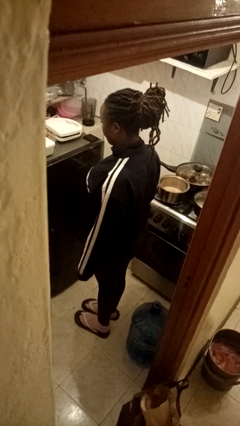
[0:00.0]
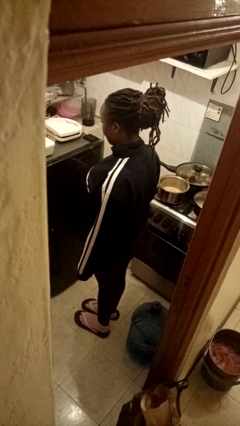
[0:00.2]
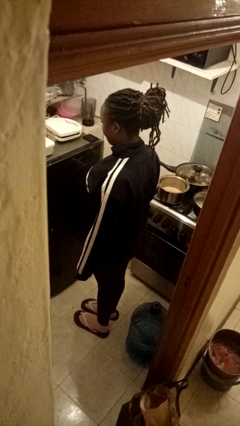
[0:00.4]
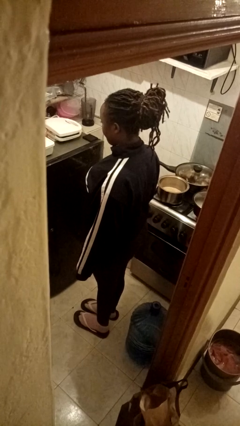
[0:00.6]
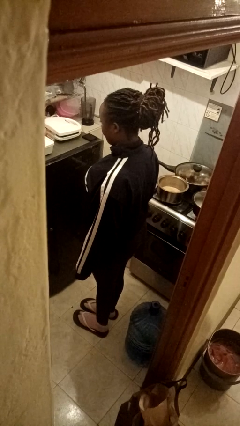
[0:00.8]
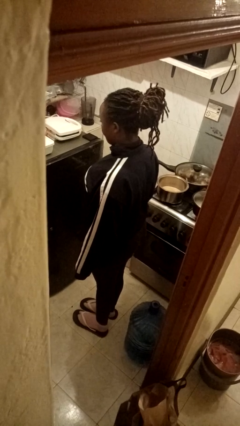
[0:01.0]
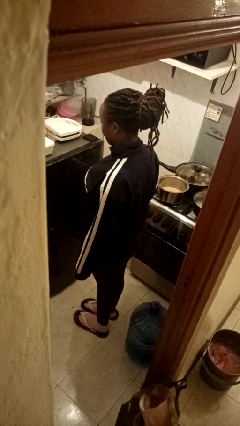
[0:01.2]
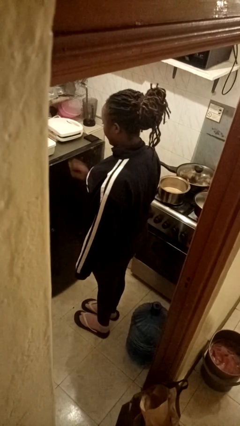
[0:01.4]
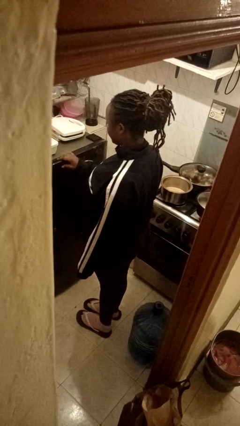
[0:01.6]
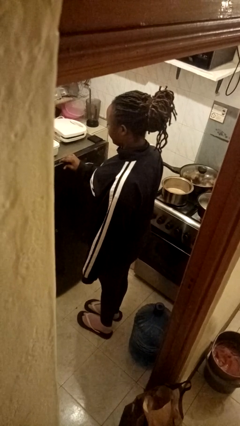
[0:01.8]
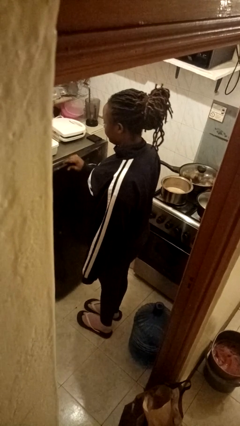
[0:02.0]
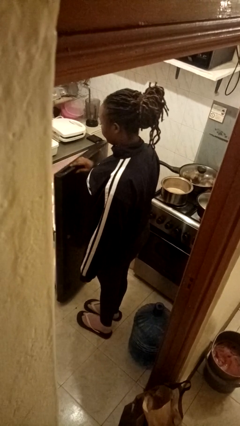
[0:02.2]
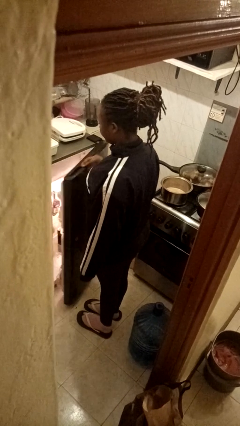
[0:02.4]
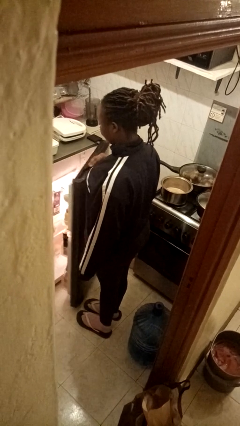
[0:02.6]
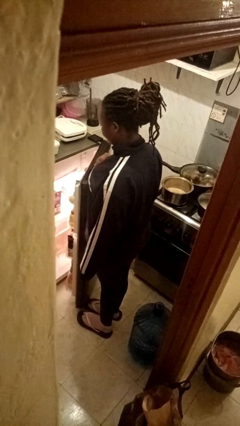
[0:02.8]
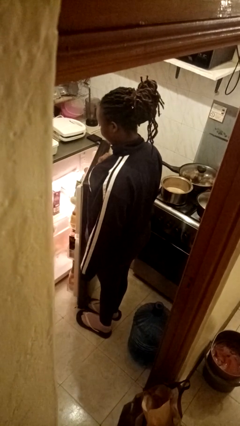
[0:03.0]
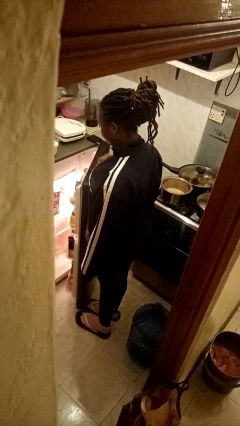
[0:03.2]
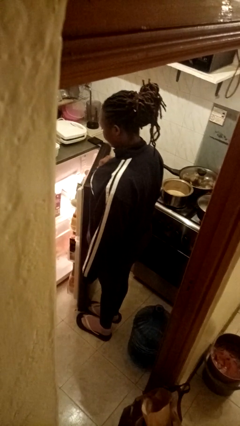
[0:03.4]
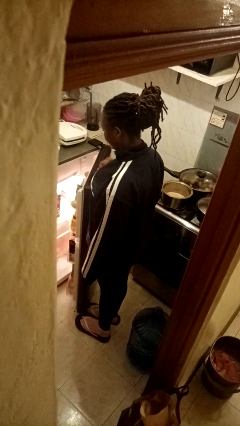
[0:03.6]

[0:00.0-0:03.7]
person opens refrigerator

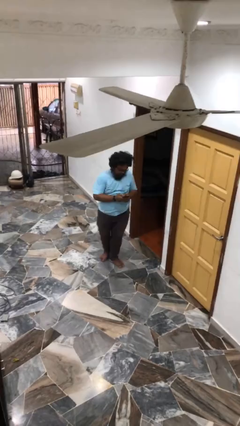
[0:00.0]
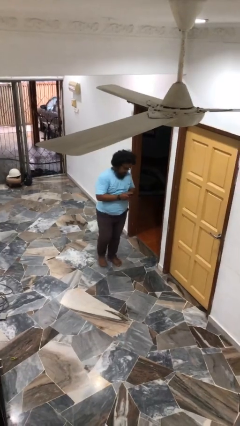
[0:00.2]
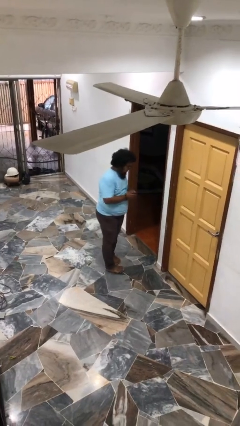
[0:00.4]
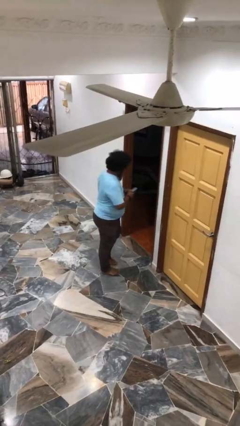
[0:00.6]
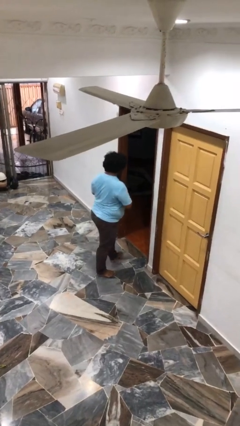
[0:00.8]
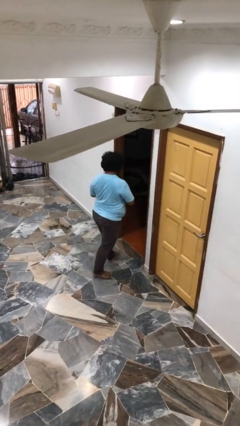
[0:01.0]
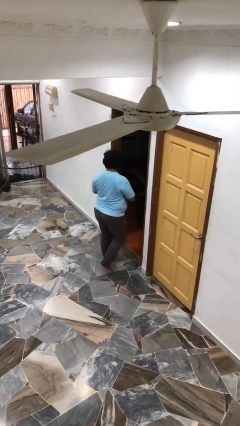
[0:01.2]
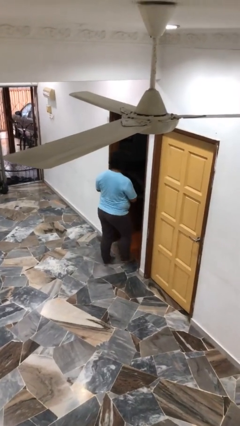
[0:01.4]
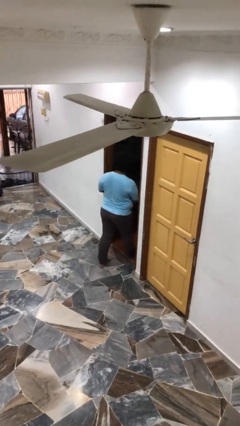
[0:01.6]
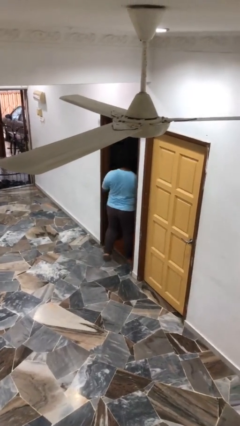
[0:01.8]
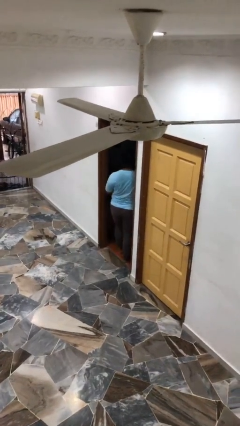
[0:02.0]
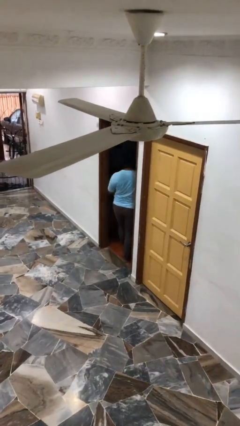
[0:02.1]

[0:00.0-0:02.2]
person exits scene through structure

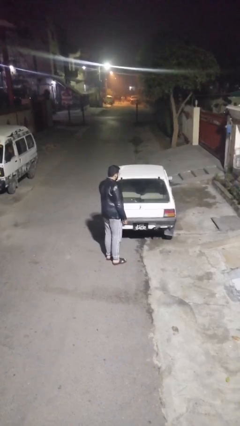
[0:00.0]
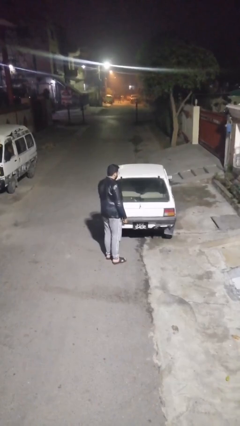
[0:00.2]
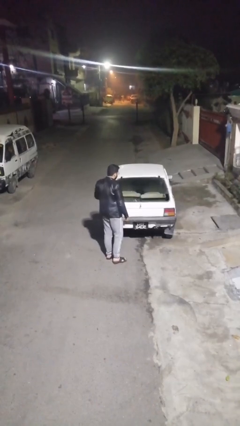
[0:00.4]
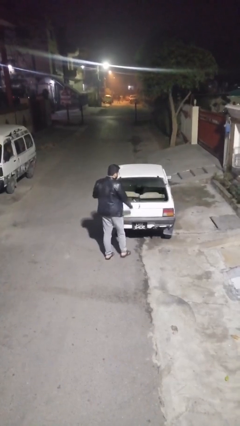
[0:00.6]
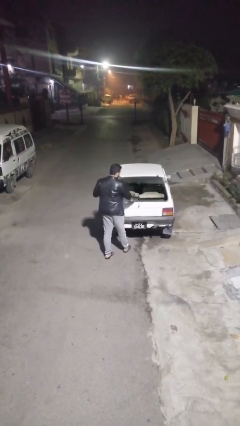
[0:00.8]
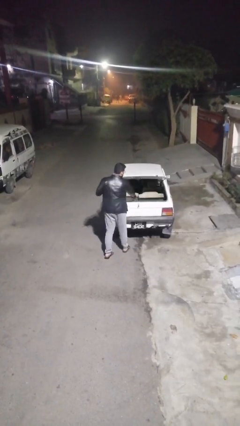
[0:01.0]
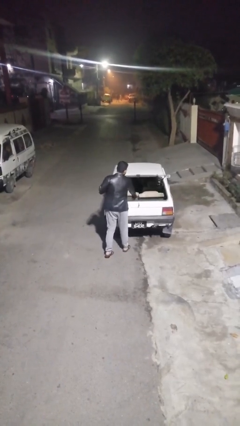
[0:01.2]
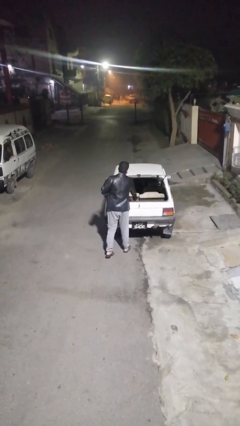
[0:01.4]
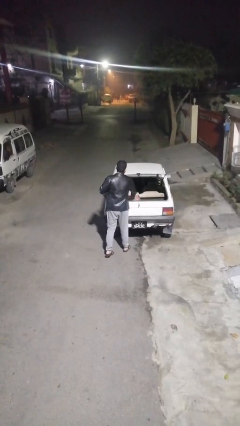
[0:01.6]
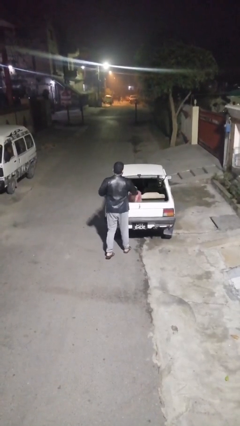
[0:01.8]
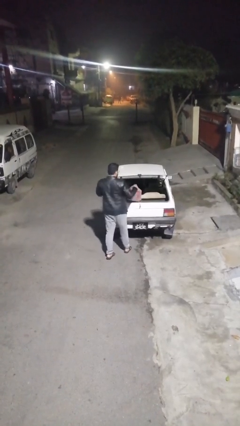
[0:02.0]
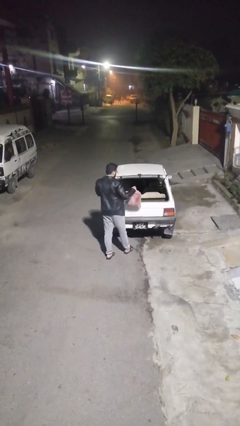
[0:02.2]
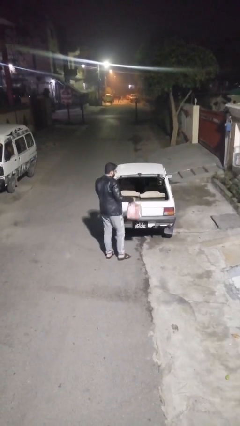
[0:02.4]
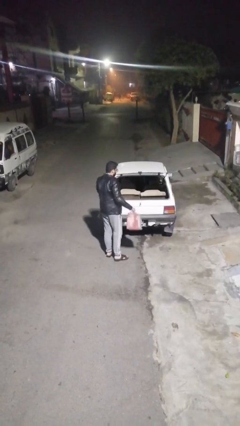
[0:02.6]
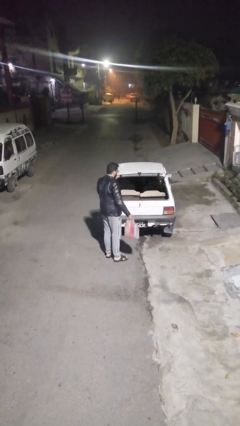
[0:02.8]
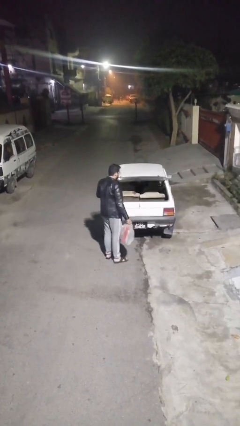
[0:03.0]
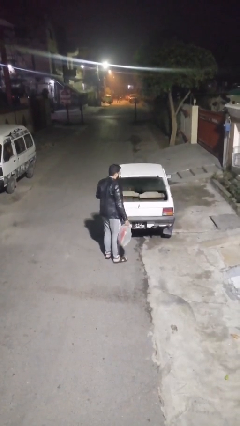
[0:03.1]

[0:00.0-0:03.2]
person unloads car

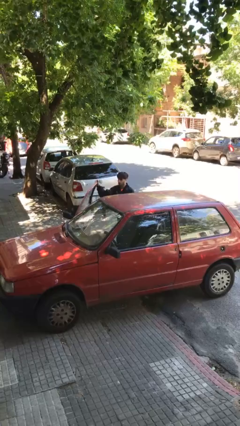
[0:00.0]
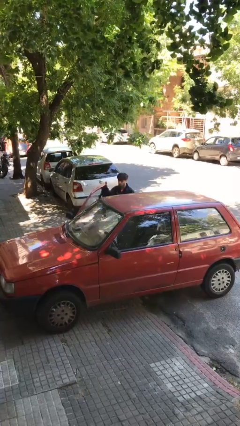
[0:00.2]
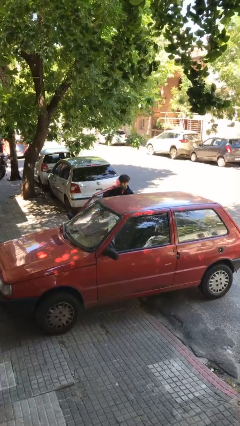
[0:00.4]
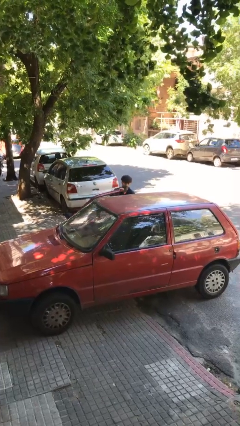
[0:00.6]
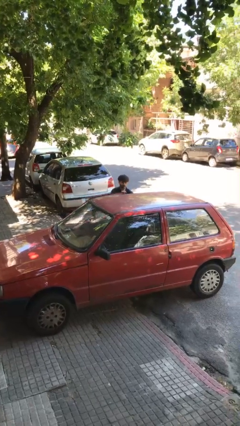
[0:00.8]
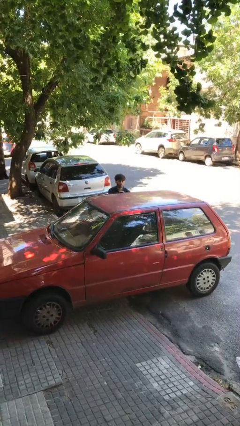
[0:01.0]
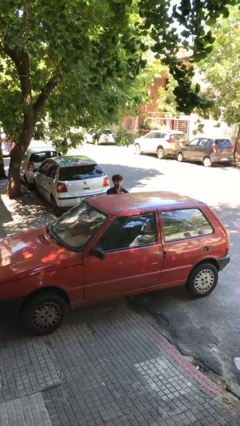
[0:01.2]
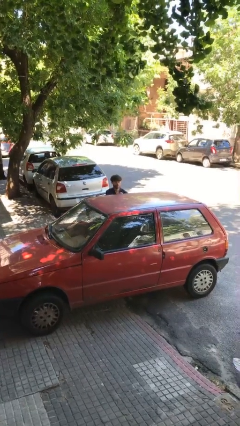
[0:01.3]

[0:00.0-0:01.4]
person closes car door

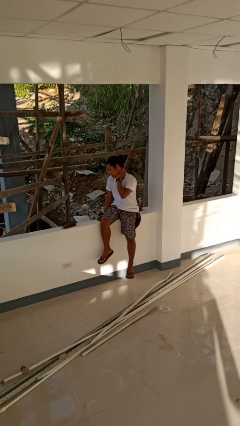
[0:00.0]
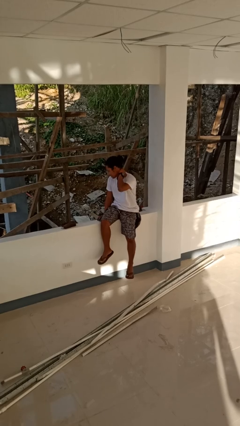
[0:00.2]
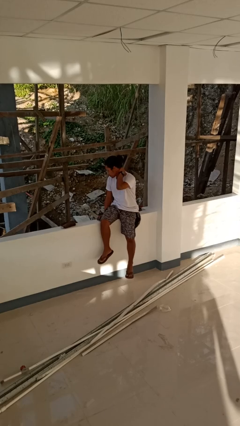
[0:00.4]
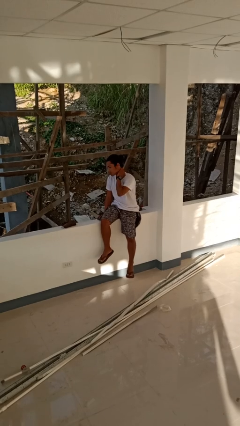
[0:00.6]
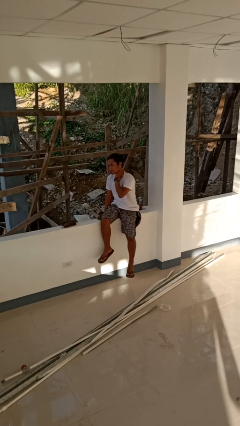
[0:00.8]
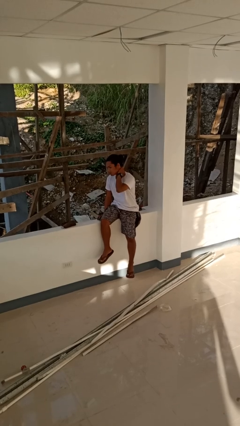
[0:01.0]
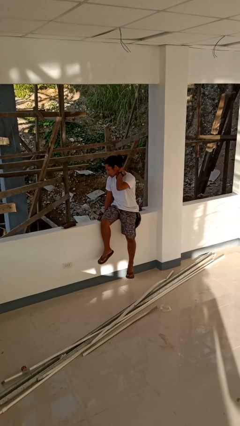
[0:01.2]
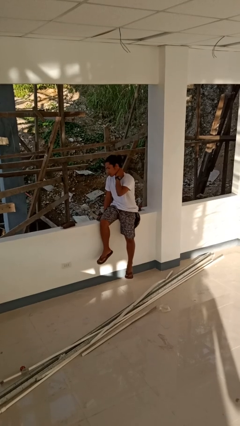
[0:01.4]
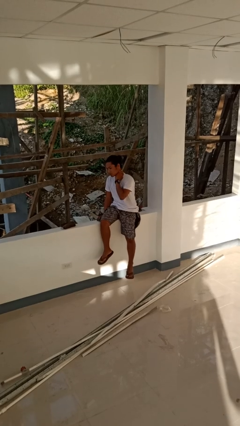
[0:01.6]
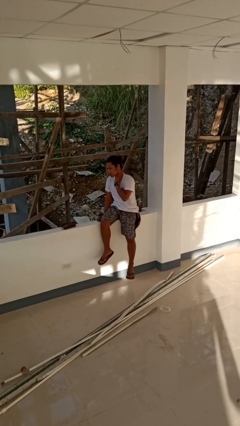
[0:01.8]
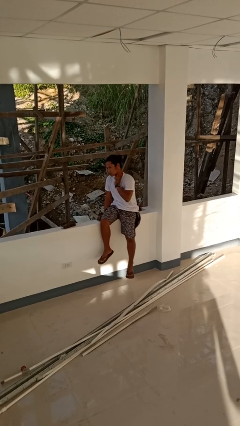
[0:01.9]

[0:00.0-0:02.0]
person rubs neck

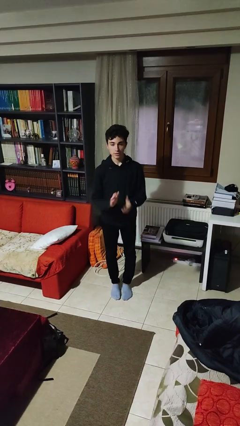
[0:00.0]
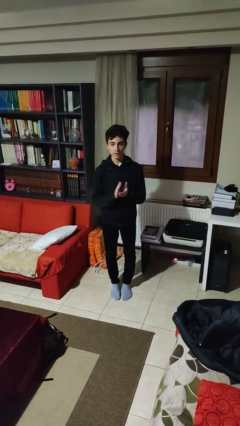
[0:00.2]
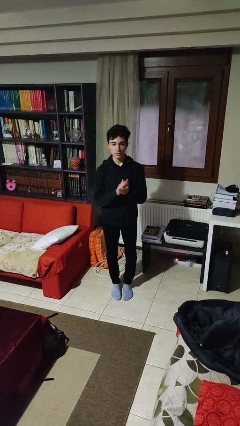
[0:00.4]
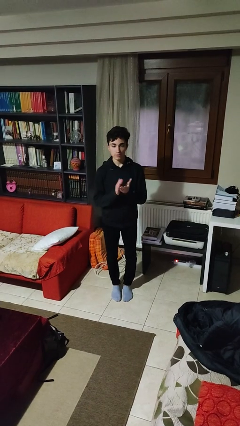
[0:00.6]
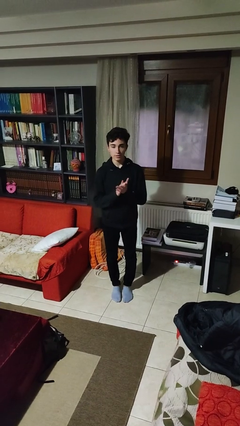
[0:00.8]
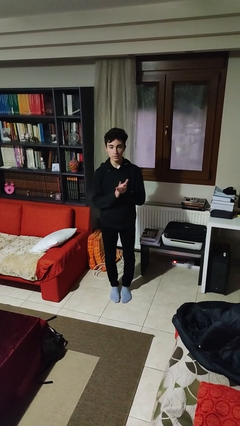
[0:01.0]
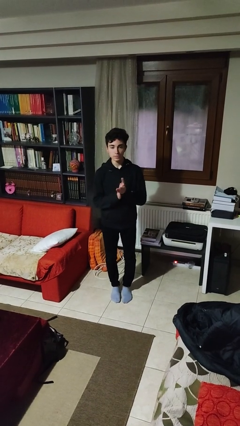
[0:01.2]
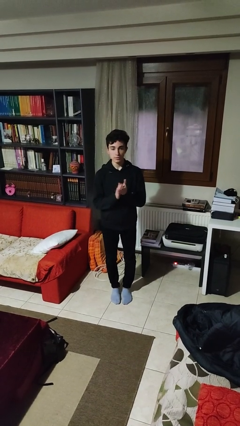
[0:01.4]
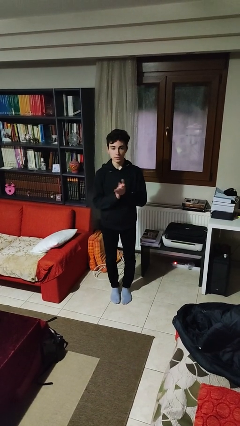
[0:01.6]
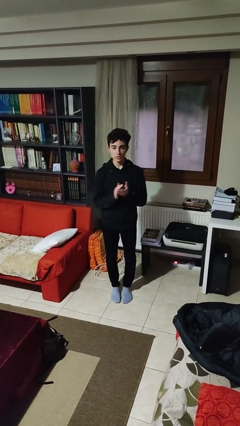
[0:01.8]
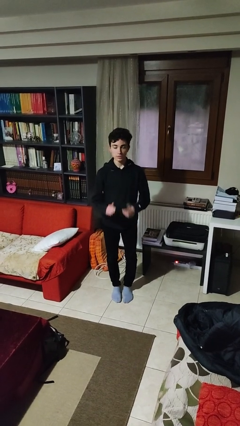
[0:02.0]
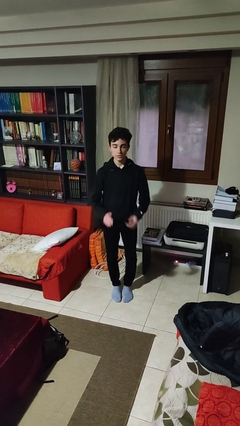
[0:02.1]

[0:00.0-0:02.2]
person claps hands

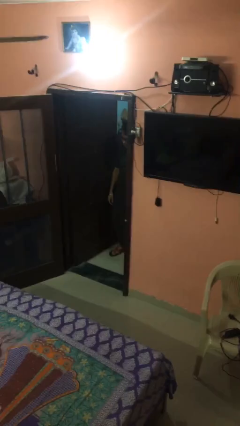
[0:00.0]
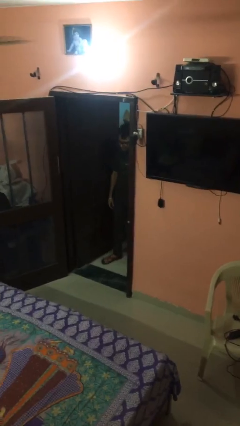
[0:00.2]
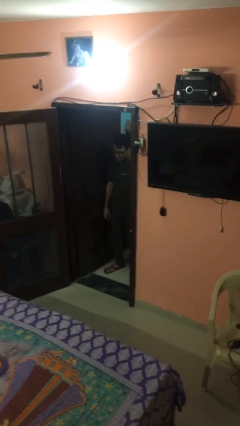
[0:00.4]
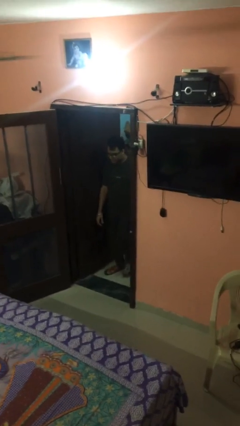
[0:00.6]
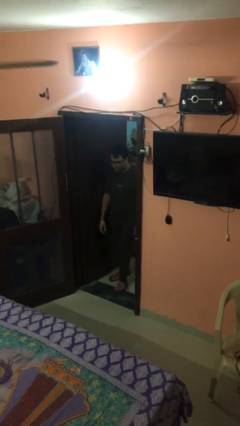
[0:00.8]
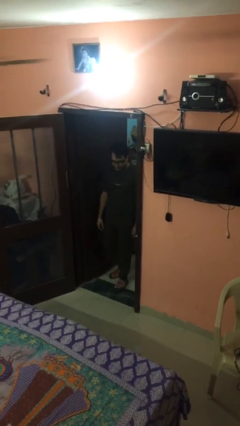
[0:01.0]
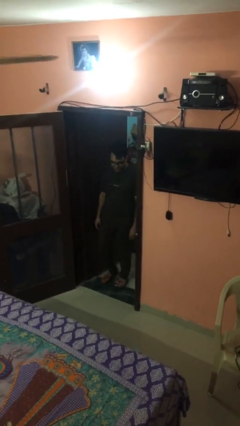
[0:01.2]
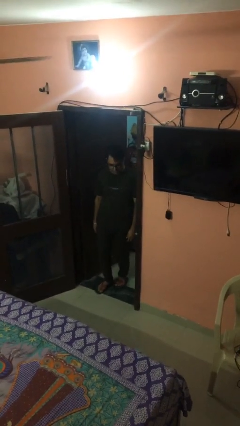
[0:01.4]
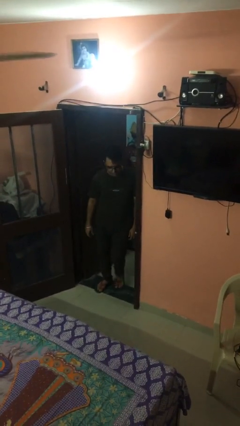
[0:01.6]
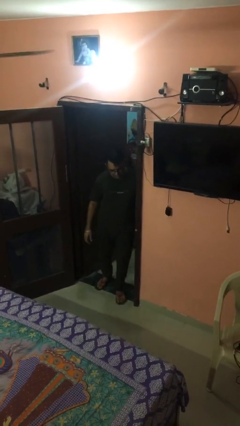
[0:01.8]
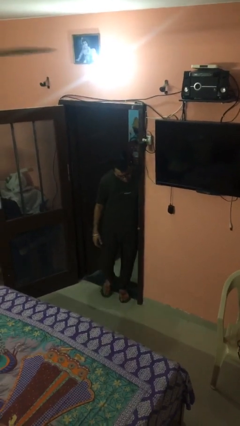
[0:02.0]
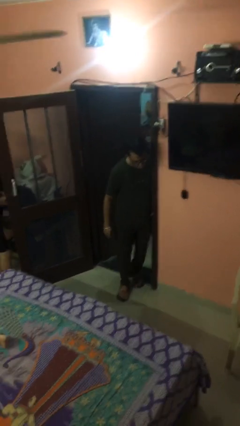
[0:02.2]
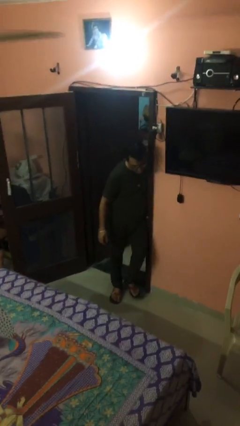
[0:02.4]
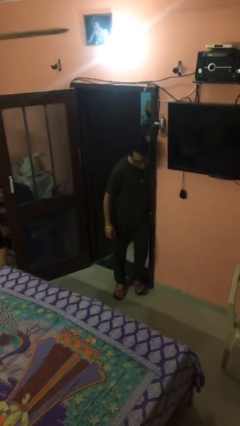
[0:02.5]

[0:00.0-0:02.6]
person bumps into wall
